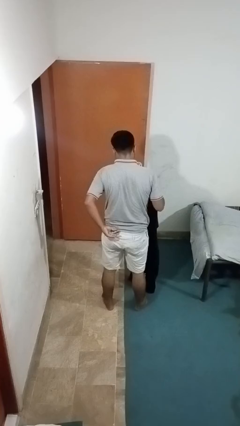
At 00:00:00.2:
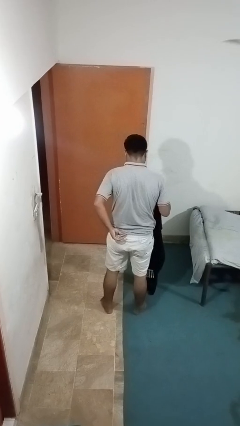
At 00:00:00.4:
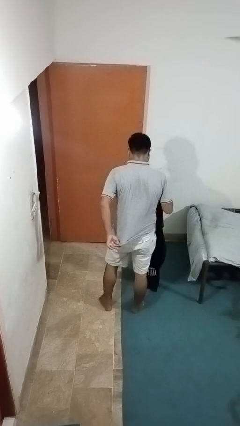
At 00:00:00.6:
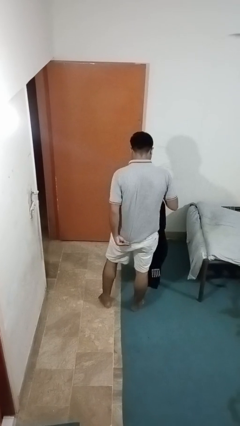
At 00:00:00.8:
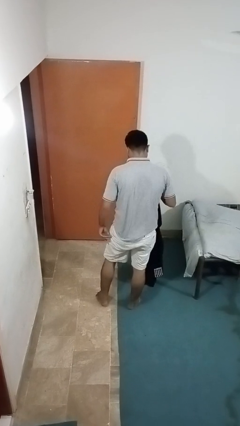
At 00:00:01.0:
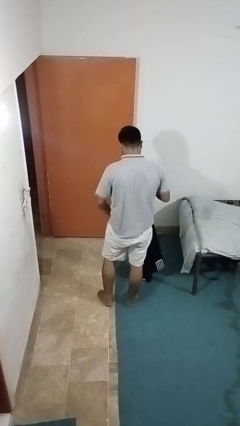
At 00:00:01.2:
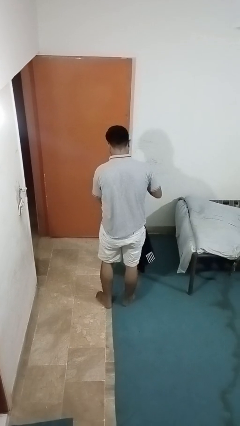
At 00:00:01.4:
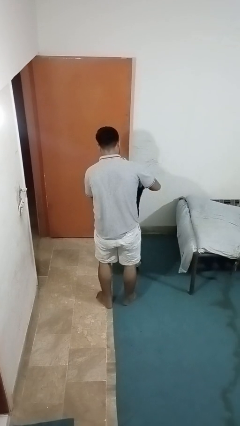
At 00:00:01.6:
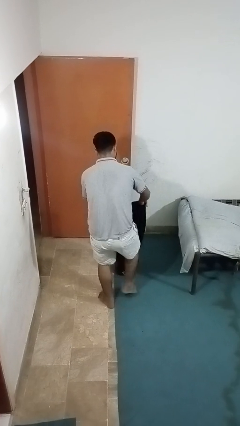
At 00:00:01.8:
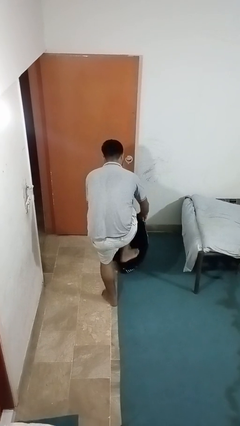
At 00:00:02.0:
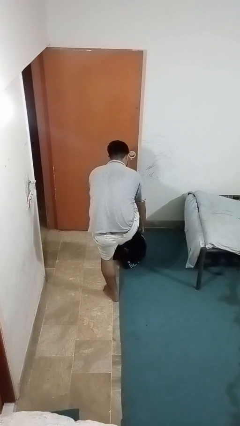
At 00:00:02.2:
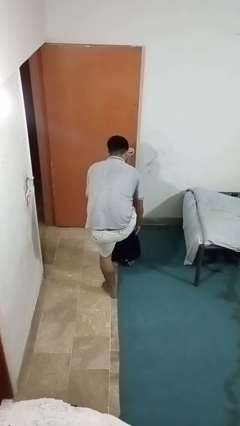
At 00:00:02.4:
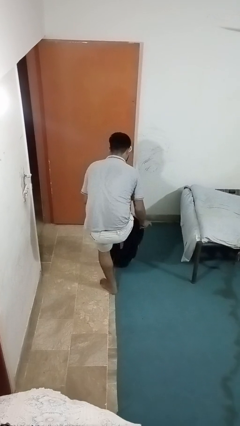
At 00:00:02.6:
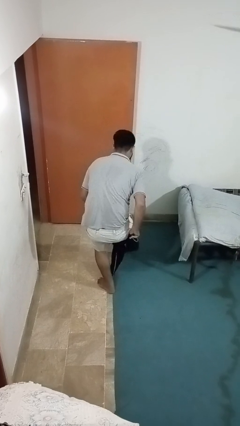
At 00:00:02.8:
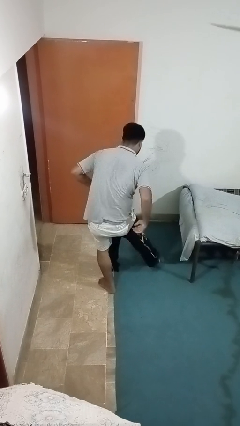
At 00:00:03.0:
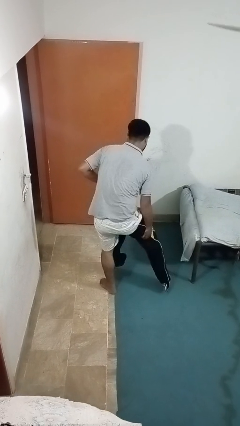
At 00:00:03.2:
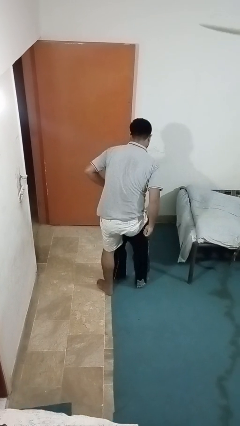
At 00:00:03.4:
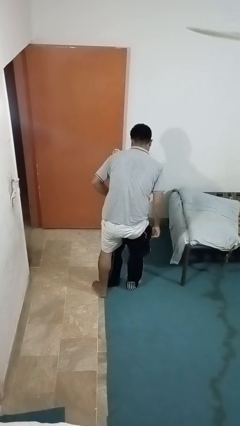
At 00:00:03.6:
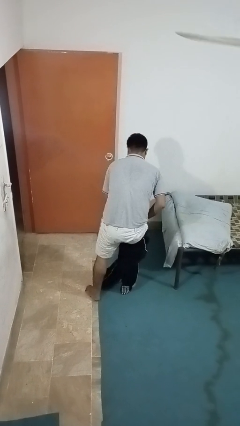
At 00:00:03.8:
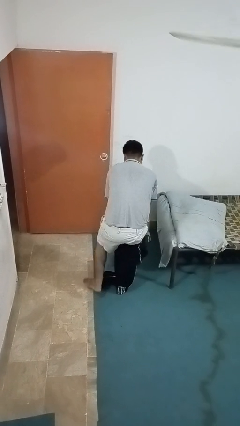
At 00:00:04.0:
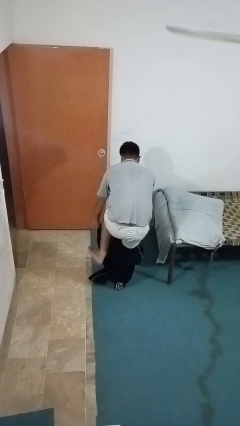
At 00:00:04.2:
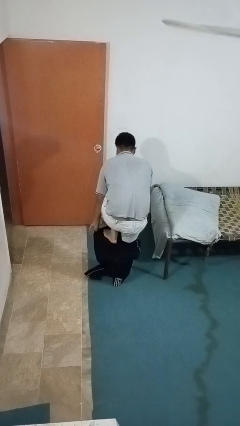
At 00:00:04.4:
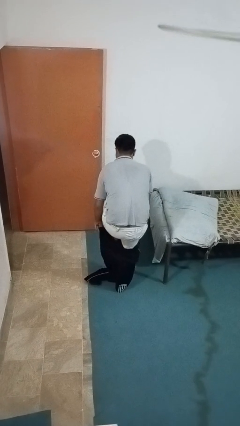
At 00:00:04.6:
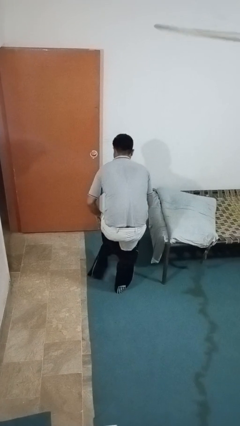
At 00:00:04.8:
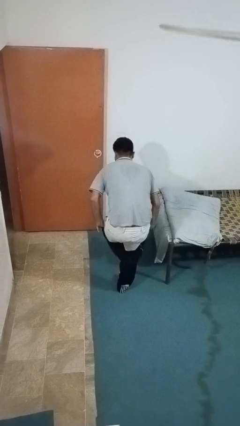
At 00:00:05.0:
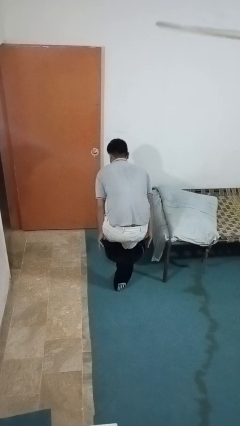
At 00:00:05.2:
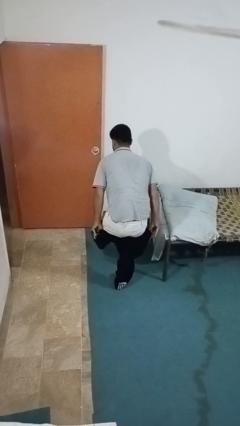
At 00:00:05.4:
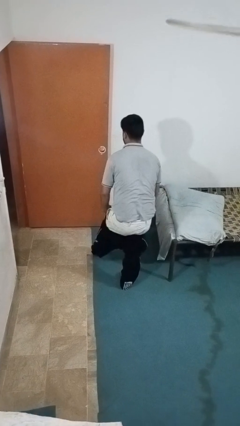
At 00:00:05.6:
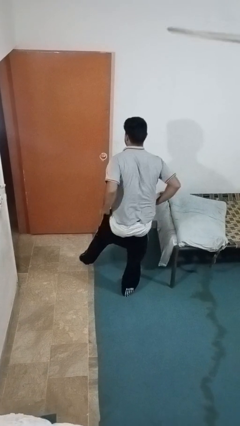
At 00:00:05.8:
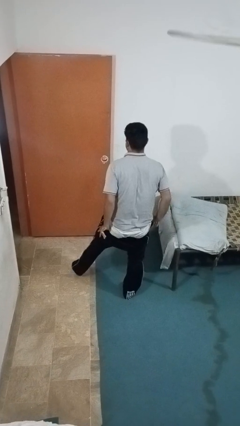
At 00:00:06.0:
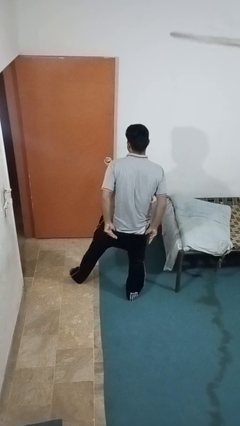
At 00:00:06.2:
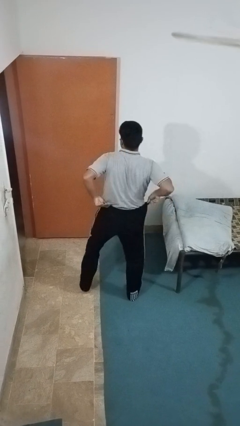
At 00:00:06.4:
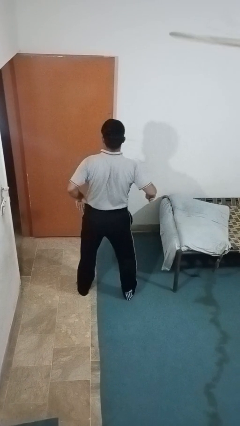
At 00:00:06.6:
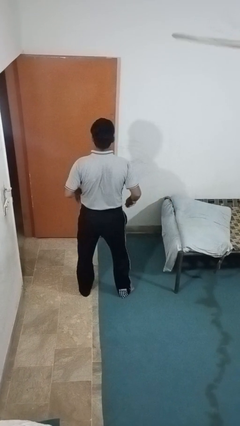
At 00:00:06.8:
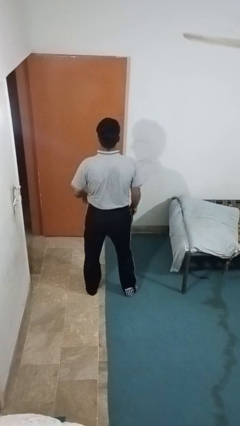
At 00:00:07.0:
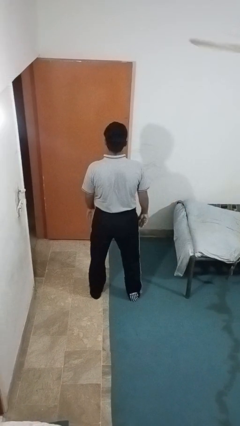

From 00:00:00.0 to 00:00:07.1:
person puts on pants

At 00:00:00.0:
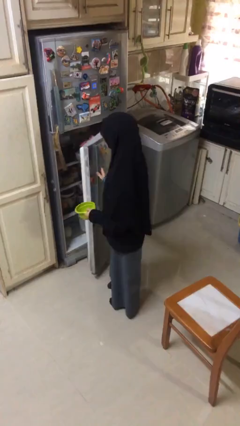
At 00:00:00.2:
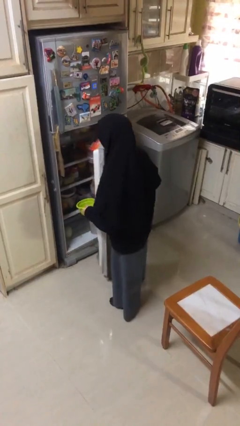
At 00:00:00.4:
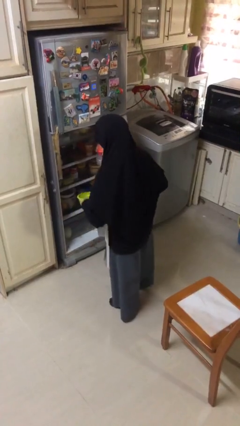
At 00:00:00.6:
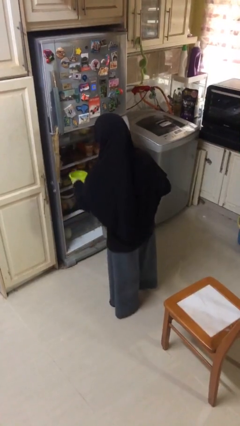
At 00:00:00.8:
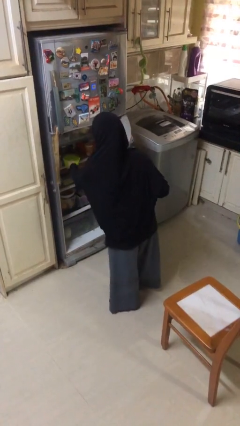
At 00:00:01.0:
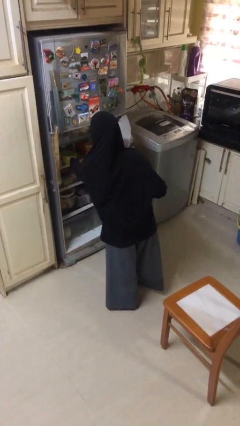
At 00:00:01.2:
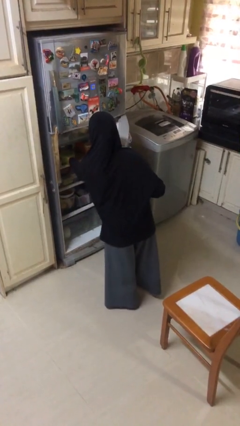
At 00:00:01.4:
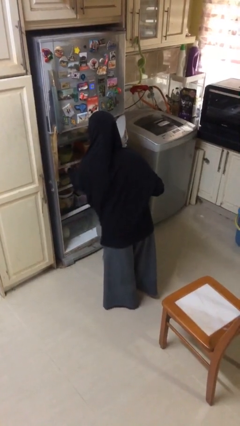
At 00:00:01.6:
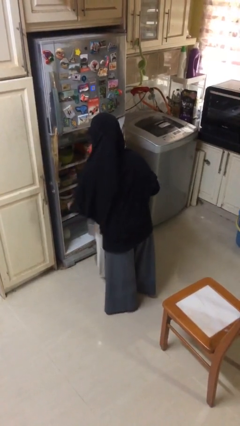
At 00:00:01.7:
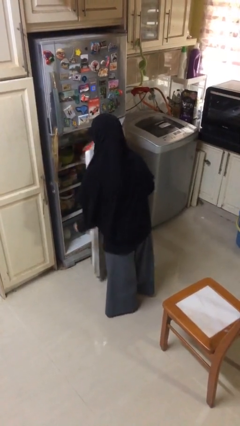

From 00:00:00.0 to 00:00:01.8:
person puts object into refrigerator

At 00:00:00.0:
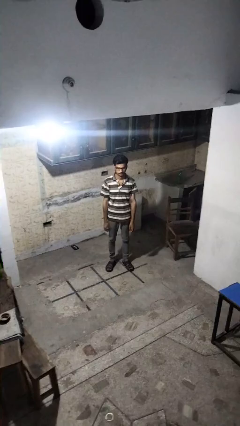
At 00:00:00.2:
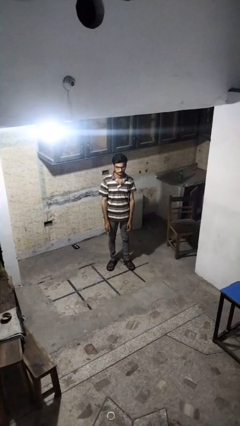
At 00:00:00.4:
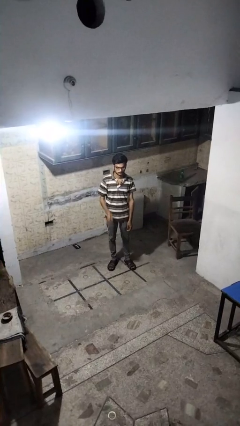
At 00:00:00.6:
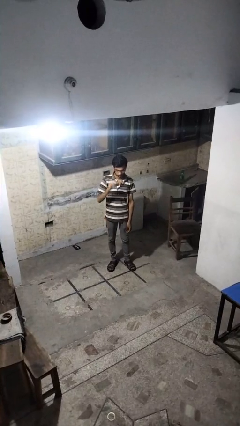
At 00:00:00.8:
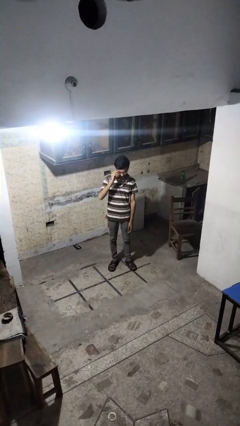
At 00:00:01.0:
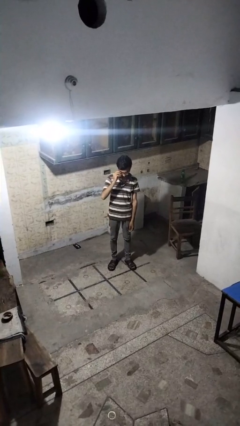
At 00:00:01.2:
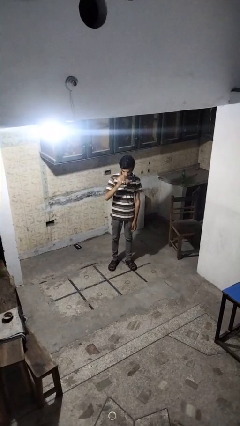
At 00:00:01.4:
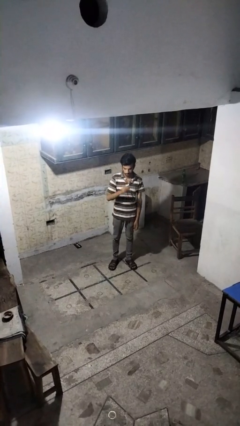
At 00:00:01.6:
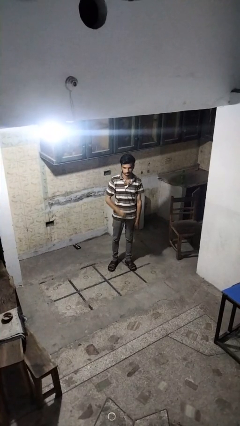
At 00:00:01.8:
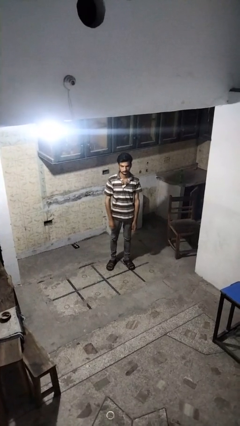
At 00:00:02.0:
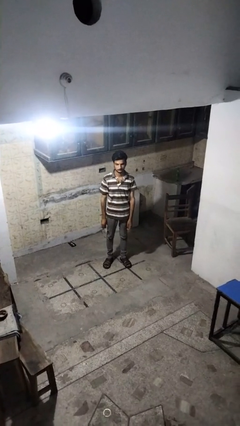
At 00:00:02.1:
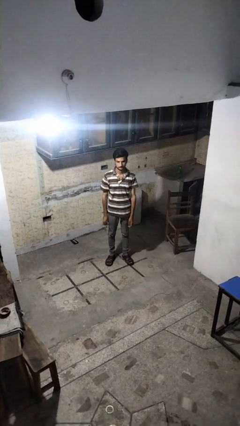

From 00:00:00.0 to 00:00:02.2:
person takes off glasses

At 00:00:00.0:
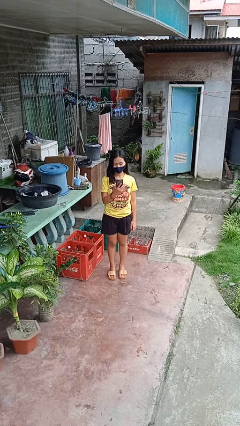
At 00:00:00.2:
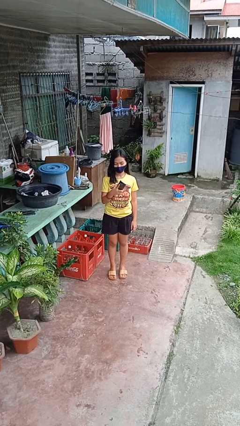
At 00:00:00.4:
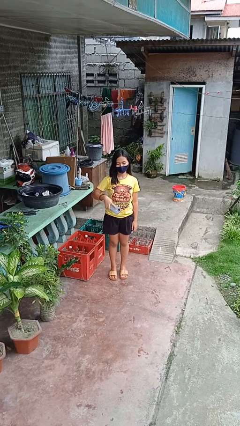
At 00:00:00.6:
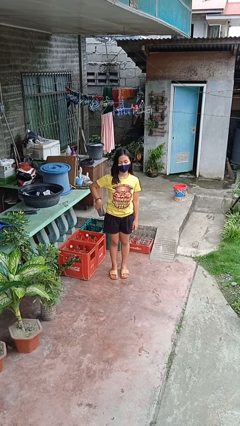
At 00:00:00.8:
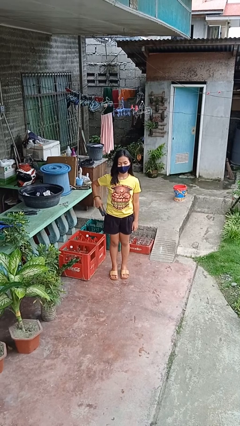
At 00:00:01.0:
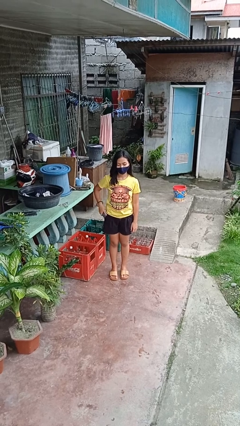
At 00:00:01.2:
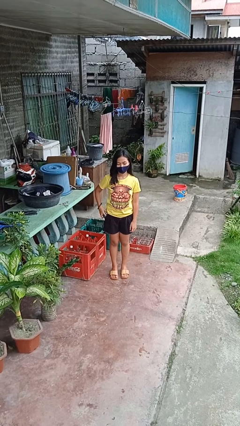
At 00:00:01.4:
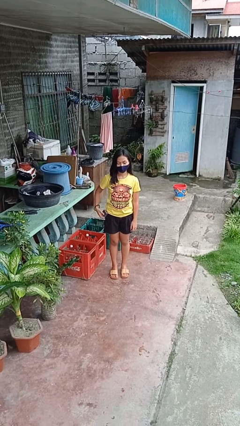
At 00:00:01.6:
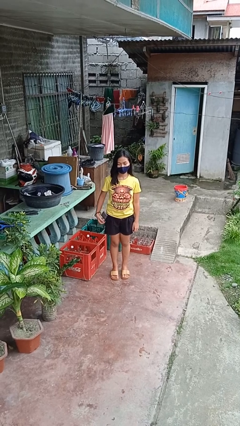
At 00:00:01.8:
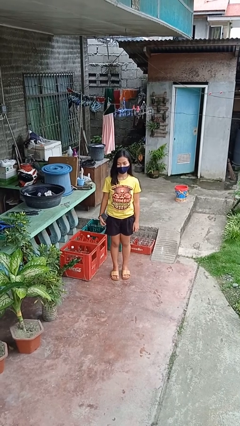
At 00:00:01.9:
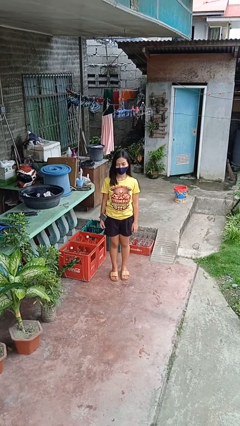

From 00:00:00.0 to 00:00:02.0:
person puts phone into pocket

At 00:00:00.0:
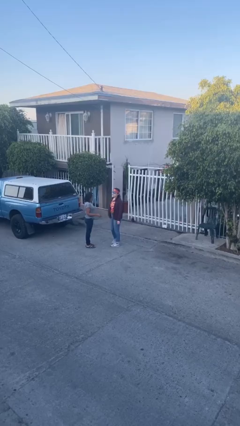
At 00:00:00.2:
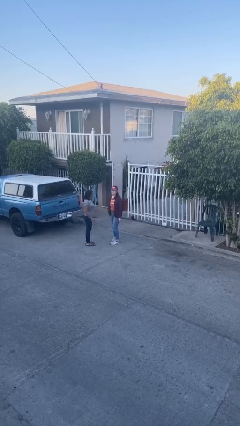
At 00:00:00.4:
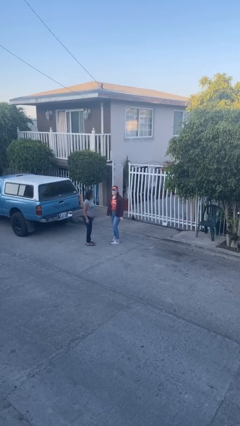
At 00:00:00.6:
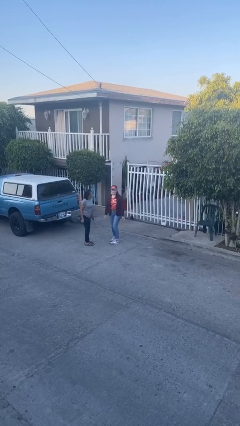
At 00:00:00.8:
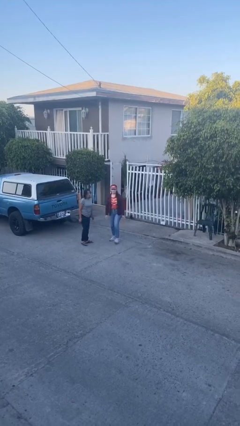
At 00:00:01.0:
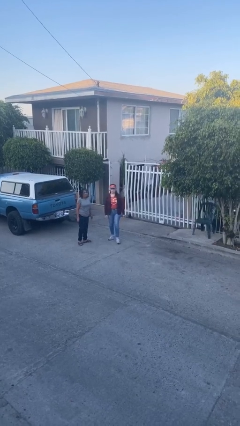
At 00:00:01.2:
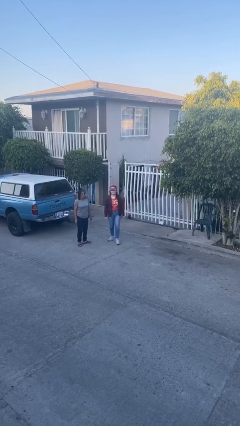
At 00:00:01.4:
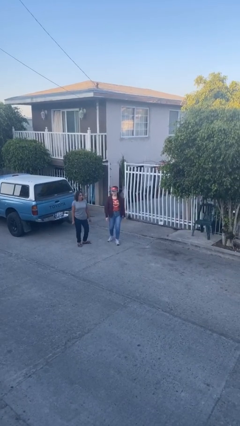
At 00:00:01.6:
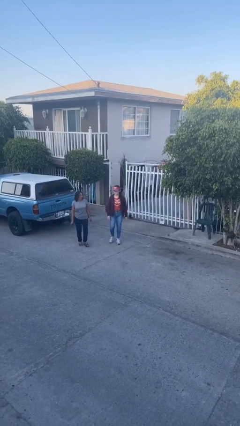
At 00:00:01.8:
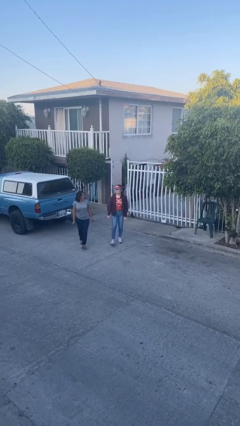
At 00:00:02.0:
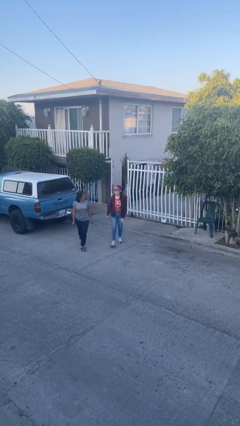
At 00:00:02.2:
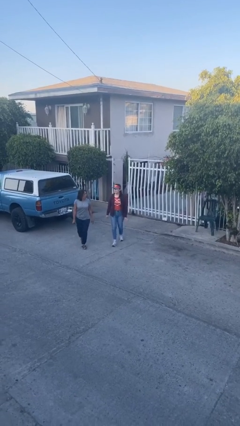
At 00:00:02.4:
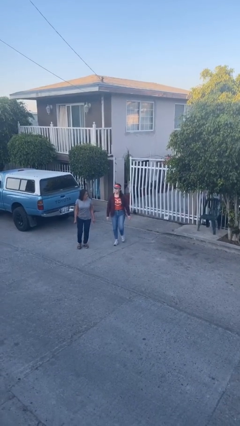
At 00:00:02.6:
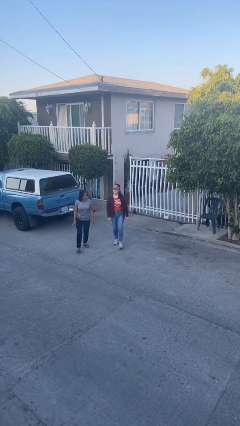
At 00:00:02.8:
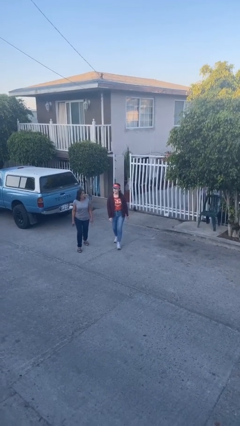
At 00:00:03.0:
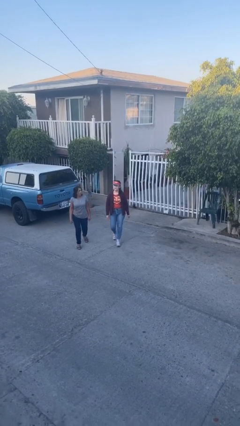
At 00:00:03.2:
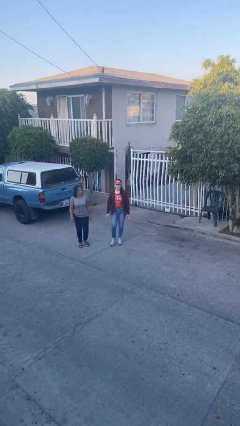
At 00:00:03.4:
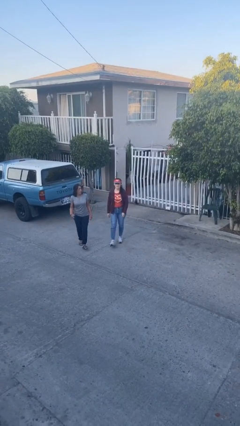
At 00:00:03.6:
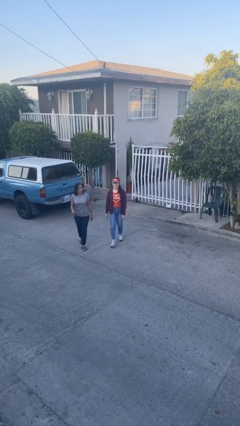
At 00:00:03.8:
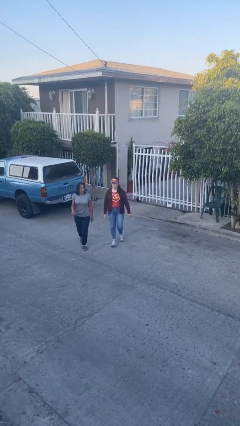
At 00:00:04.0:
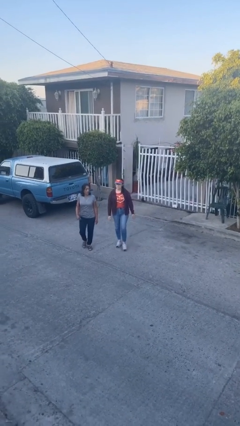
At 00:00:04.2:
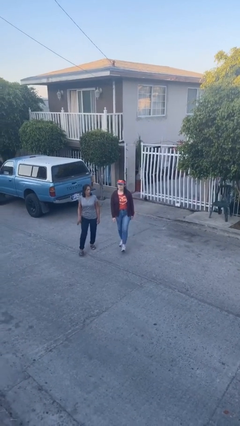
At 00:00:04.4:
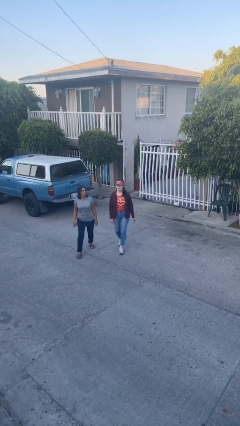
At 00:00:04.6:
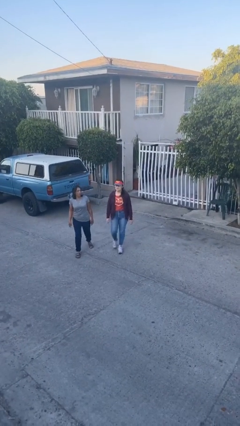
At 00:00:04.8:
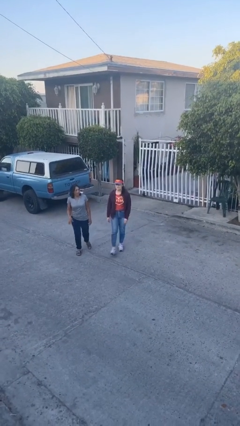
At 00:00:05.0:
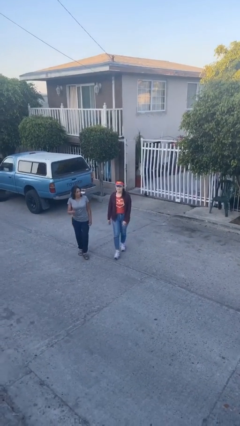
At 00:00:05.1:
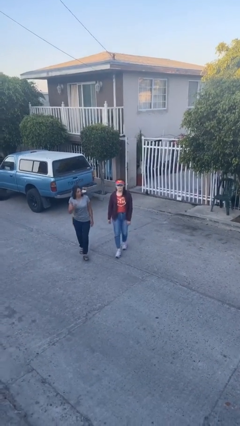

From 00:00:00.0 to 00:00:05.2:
person talks to person
